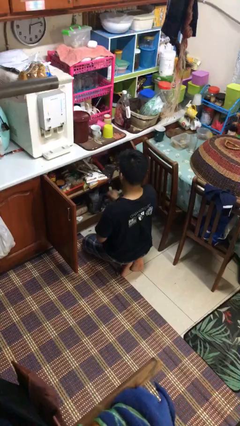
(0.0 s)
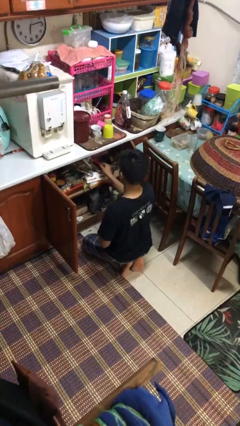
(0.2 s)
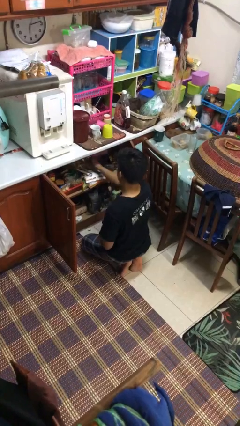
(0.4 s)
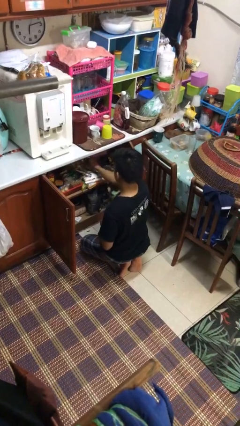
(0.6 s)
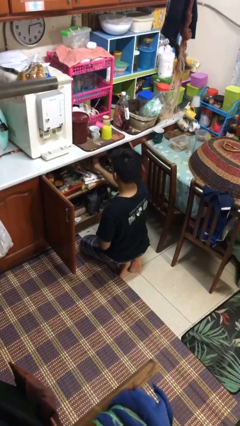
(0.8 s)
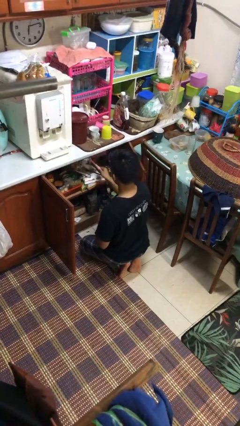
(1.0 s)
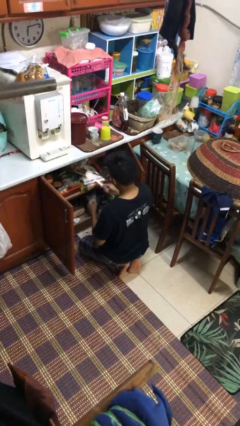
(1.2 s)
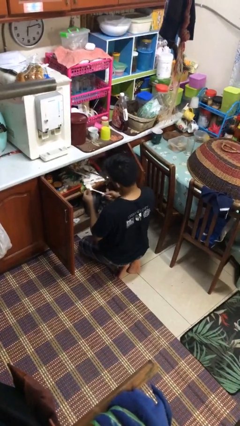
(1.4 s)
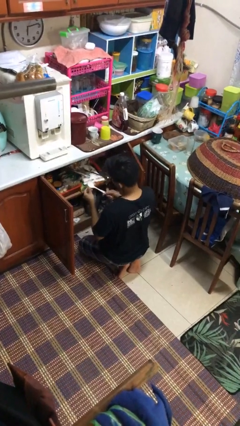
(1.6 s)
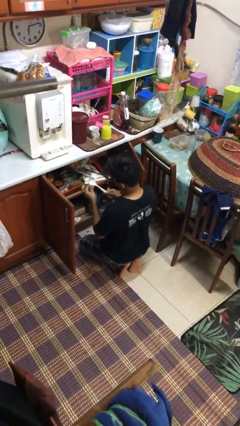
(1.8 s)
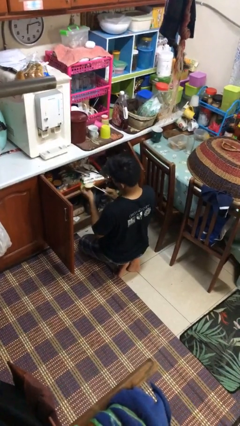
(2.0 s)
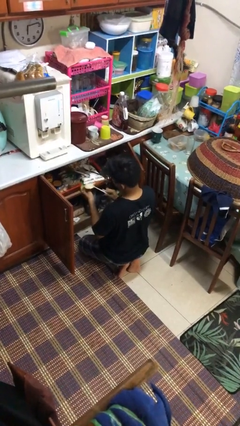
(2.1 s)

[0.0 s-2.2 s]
person takes object from kitchen drawer

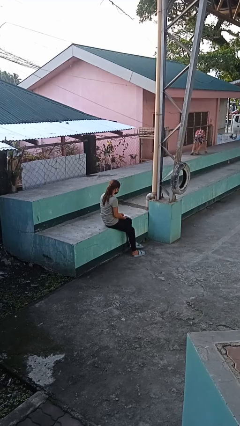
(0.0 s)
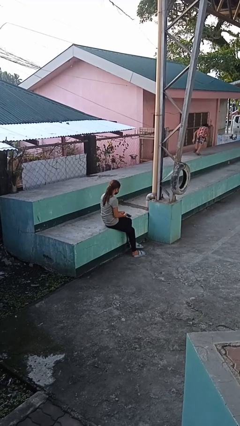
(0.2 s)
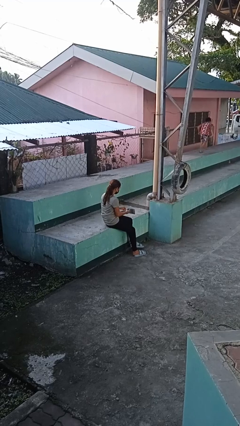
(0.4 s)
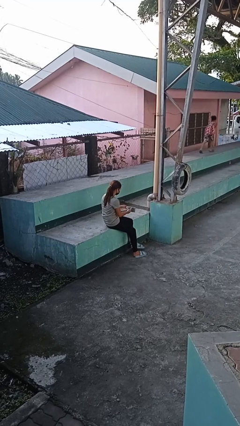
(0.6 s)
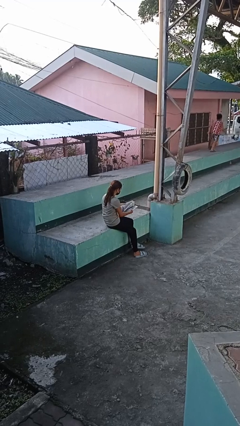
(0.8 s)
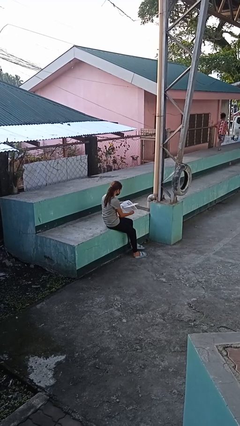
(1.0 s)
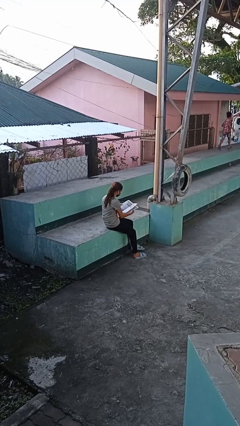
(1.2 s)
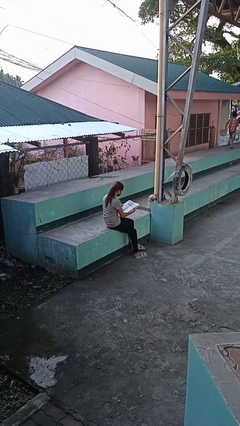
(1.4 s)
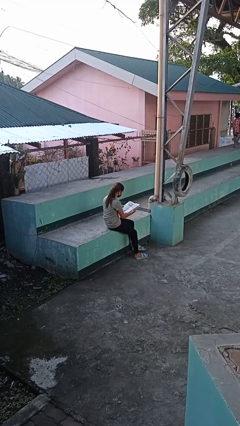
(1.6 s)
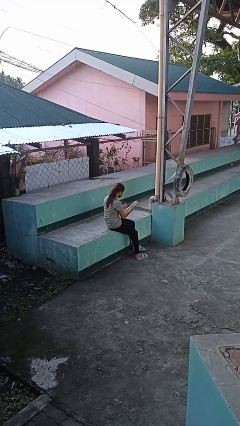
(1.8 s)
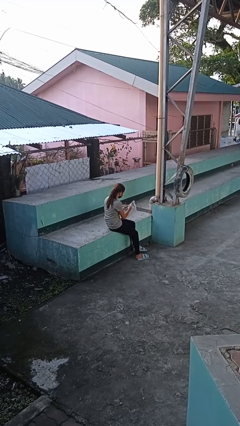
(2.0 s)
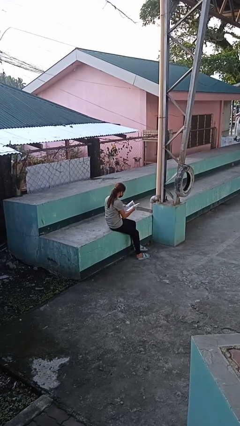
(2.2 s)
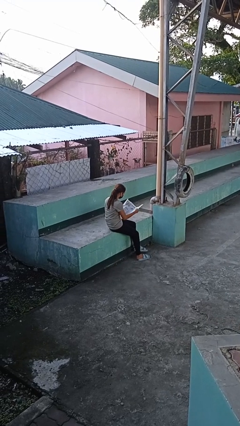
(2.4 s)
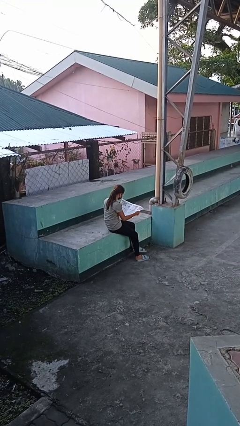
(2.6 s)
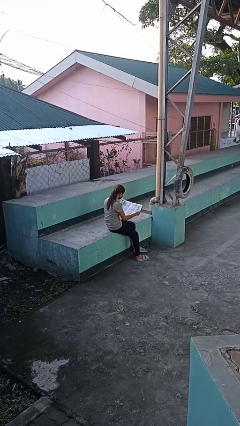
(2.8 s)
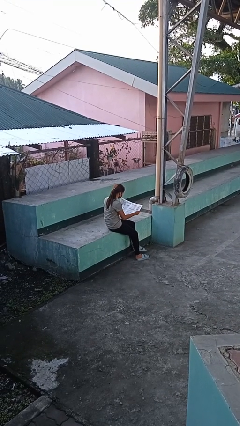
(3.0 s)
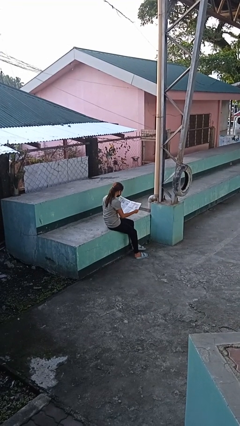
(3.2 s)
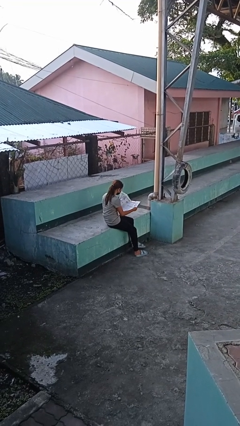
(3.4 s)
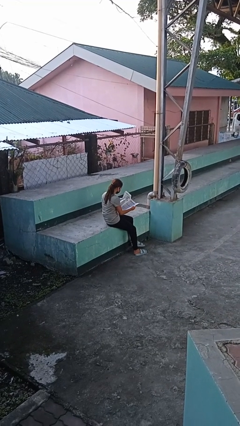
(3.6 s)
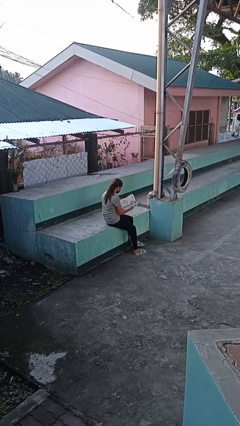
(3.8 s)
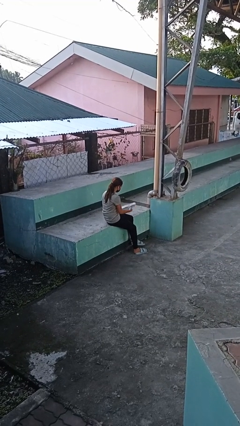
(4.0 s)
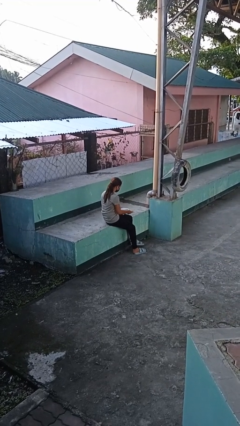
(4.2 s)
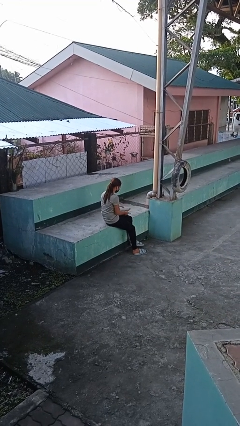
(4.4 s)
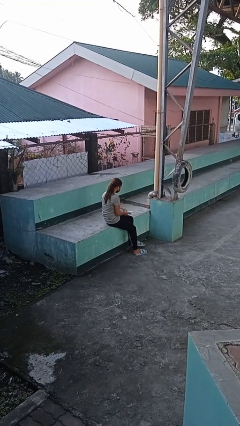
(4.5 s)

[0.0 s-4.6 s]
person reads newspaper

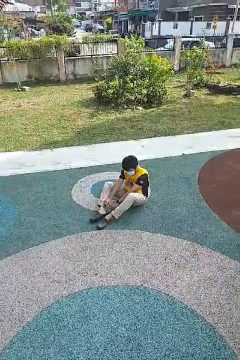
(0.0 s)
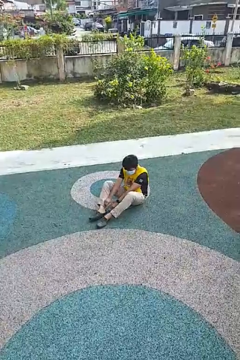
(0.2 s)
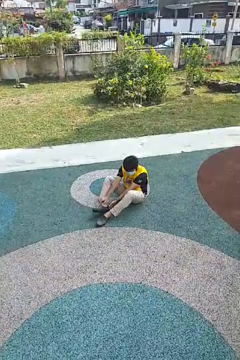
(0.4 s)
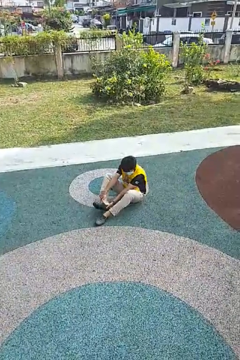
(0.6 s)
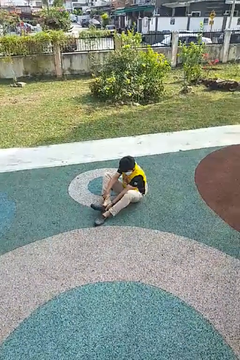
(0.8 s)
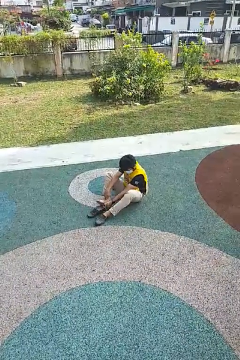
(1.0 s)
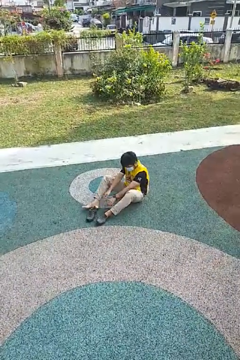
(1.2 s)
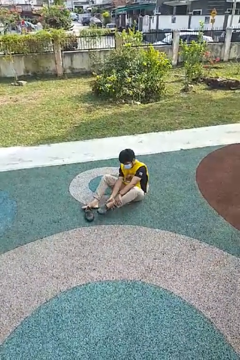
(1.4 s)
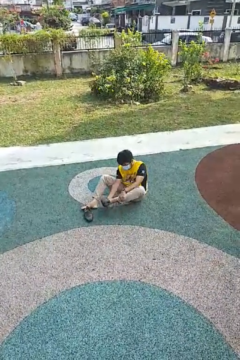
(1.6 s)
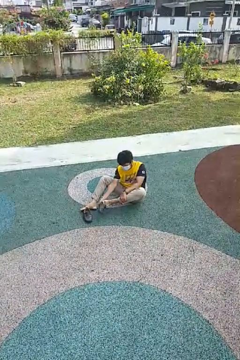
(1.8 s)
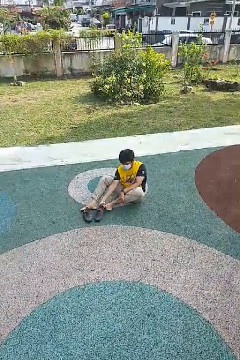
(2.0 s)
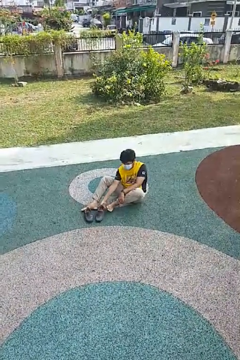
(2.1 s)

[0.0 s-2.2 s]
person takes off shoes

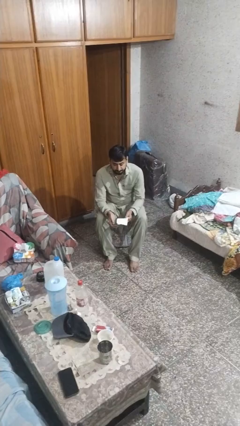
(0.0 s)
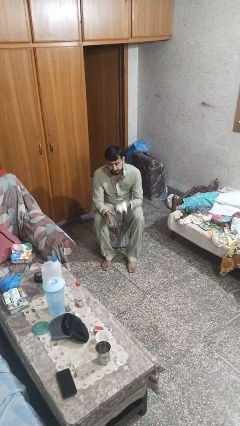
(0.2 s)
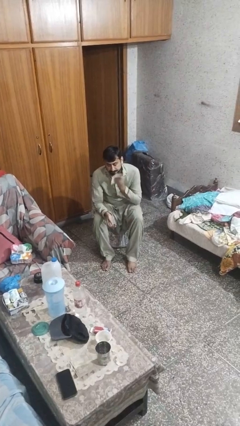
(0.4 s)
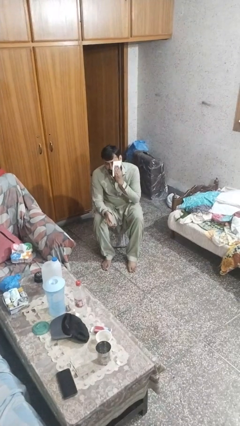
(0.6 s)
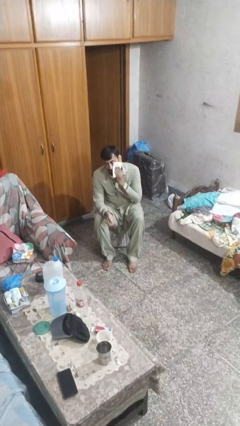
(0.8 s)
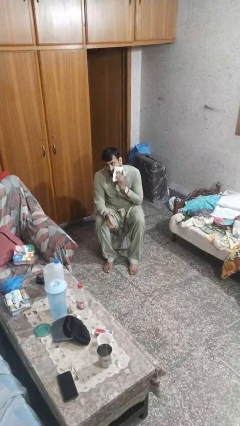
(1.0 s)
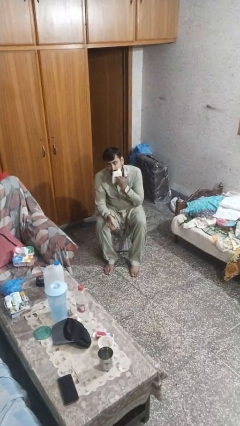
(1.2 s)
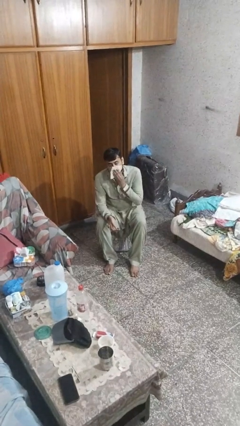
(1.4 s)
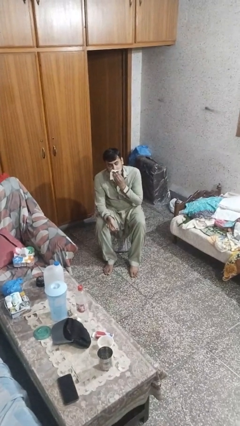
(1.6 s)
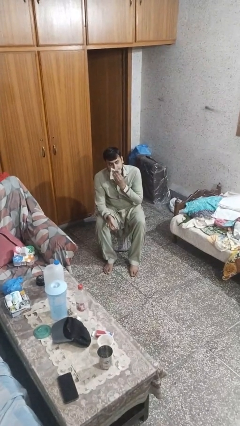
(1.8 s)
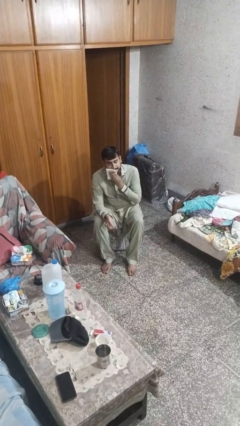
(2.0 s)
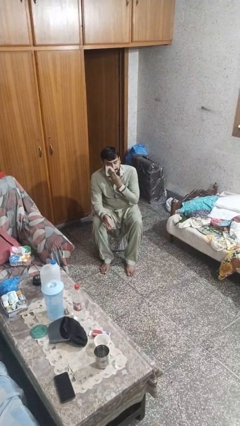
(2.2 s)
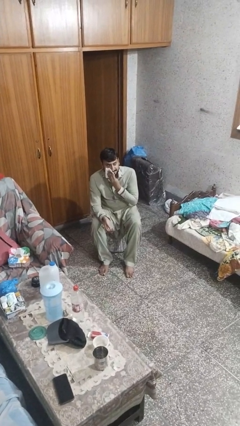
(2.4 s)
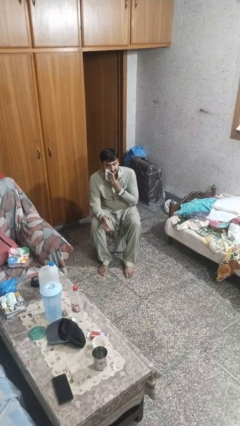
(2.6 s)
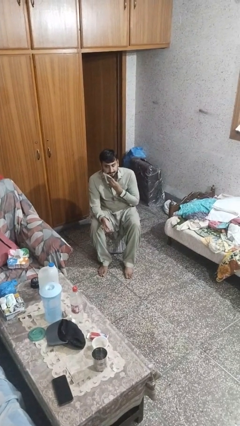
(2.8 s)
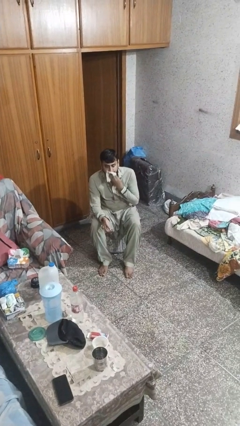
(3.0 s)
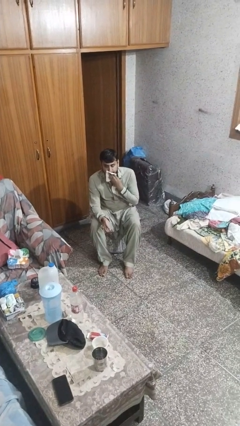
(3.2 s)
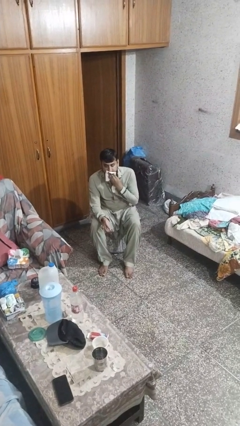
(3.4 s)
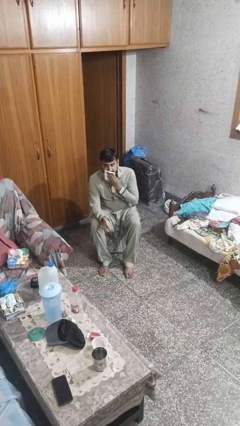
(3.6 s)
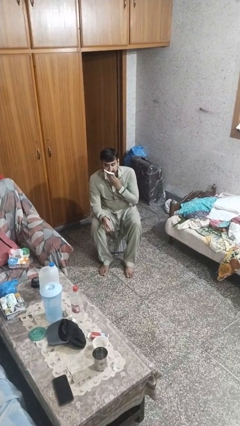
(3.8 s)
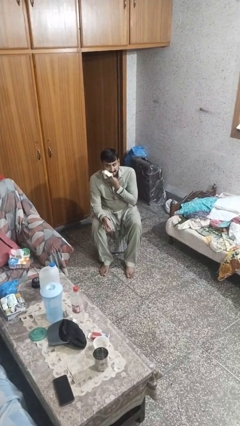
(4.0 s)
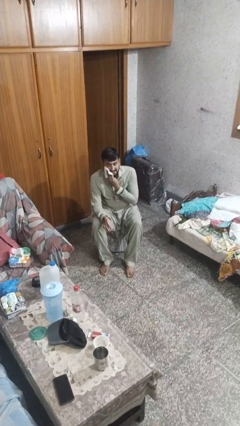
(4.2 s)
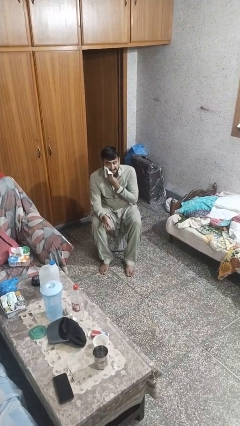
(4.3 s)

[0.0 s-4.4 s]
person wipes mouth with napkin

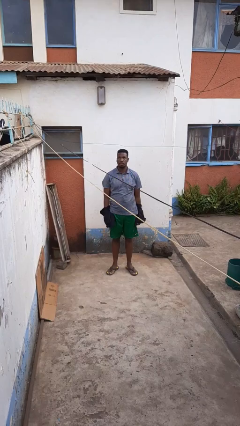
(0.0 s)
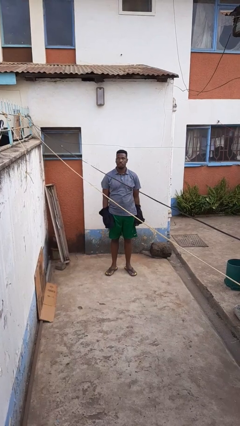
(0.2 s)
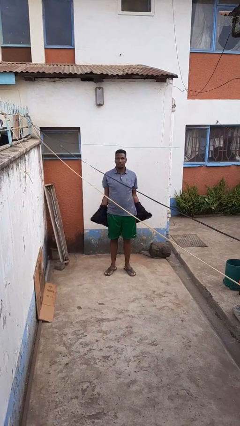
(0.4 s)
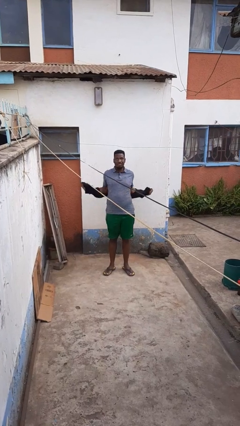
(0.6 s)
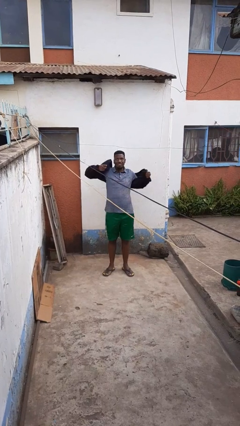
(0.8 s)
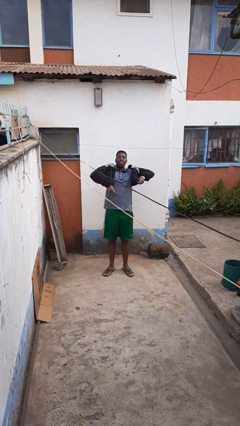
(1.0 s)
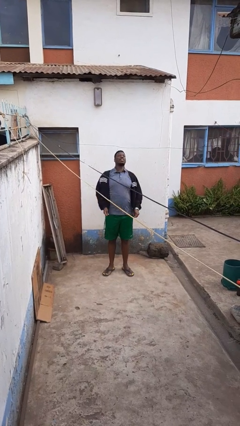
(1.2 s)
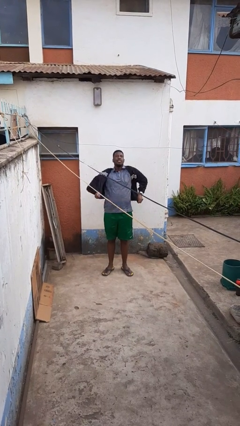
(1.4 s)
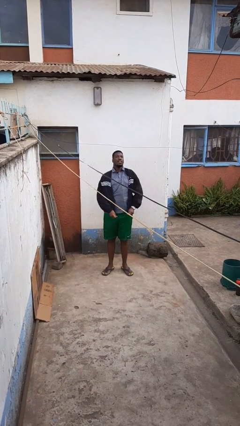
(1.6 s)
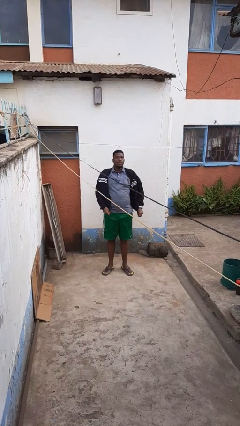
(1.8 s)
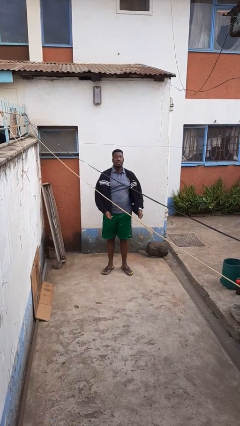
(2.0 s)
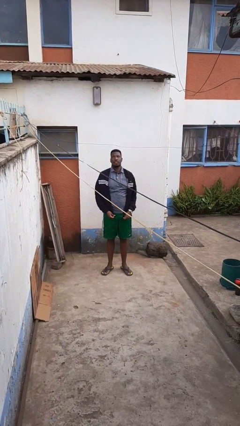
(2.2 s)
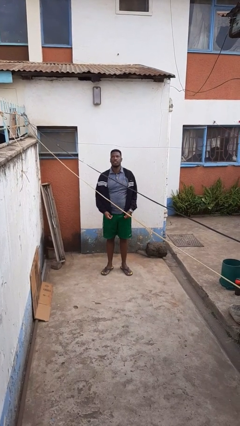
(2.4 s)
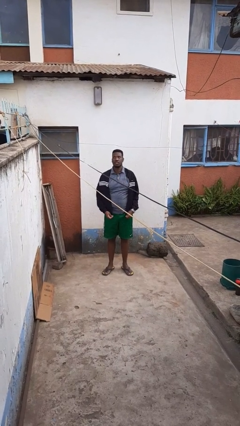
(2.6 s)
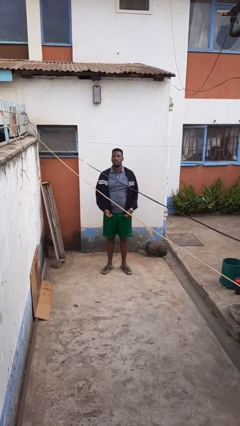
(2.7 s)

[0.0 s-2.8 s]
person puts on jacket

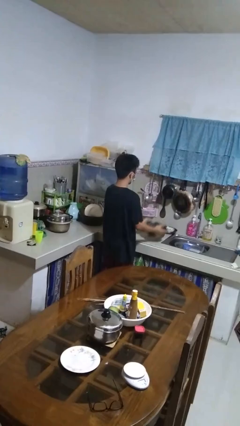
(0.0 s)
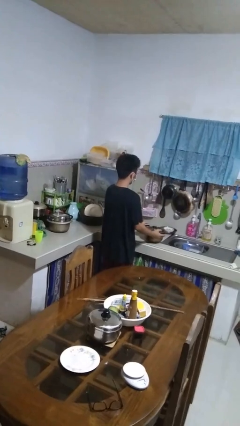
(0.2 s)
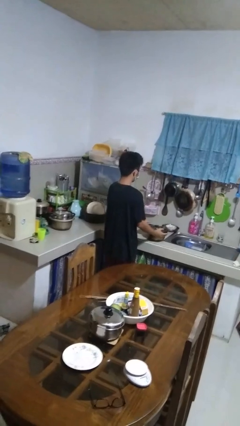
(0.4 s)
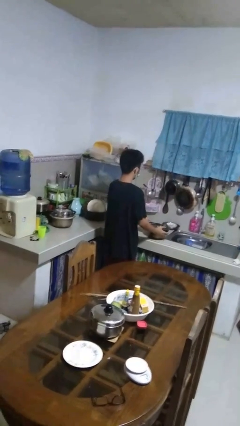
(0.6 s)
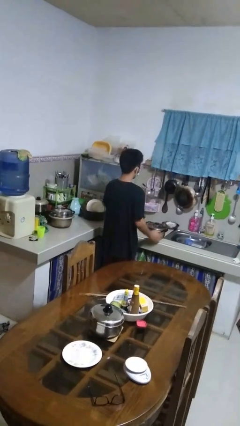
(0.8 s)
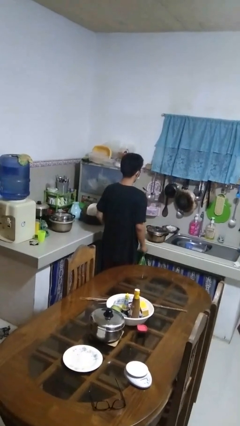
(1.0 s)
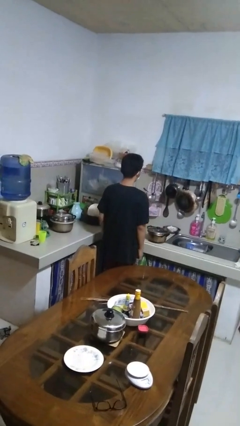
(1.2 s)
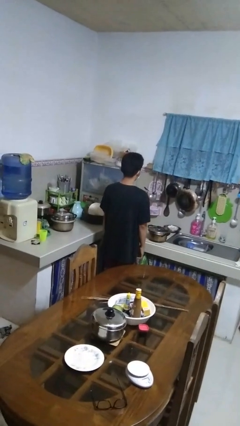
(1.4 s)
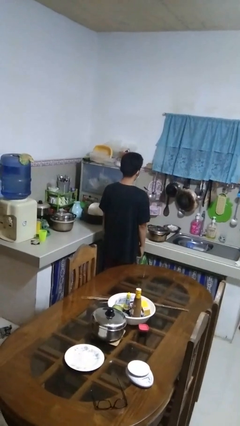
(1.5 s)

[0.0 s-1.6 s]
person puts down object on countertop

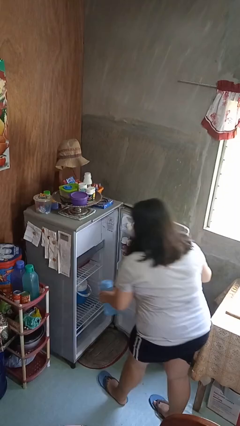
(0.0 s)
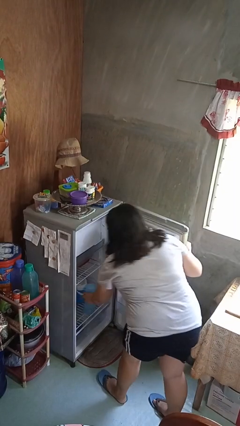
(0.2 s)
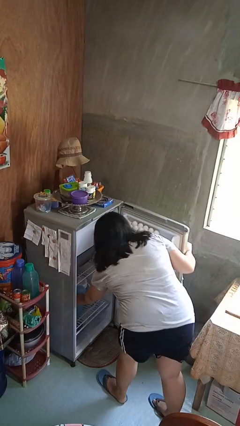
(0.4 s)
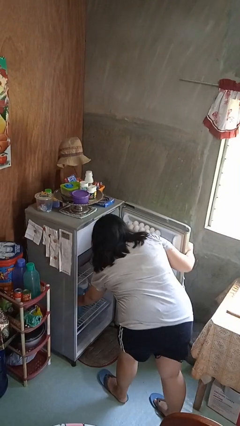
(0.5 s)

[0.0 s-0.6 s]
person puts object into refrigerator
